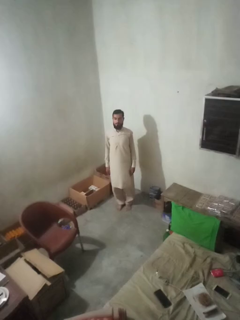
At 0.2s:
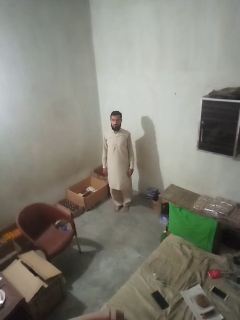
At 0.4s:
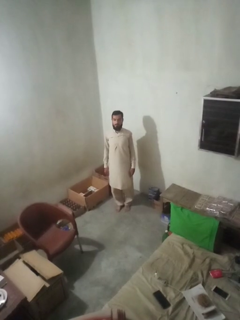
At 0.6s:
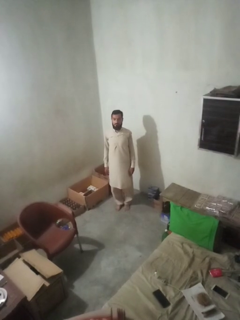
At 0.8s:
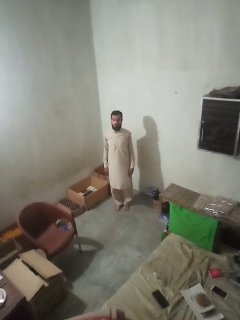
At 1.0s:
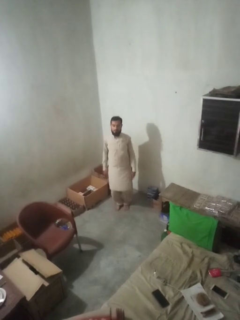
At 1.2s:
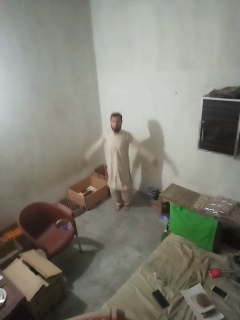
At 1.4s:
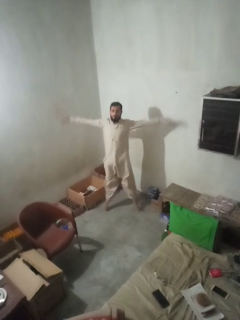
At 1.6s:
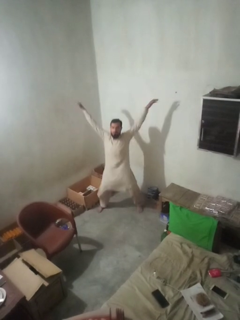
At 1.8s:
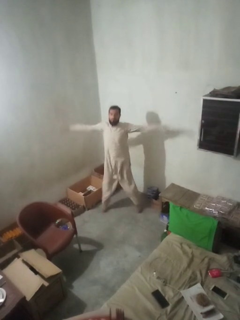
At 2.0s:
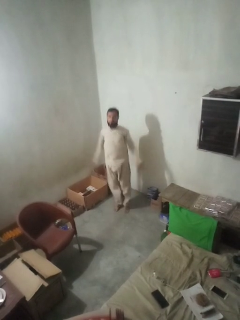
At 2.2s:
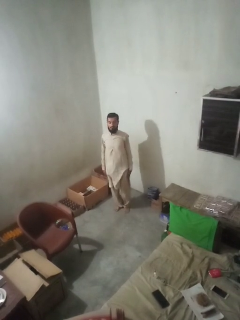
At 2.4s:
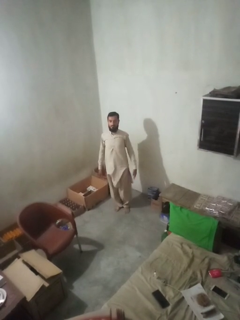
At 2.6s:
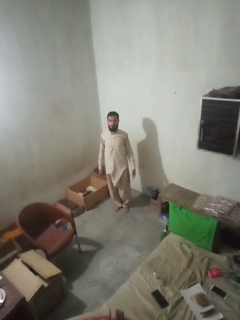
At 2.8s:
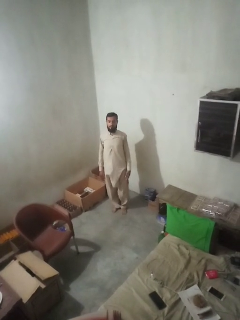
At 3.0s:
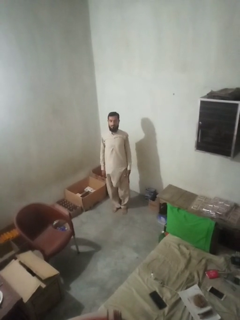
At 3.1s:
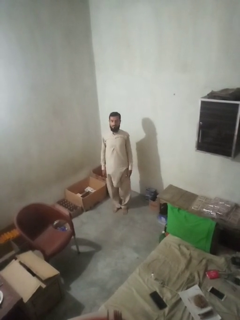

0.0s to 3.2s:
person exercises with jumping jacks

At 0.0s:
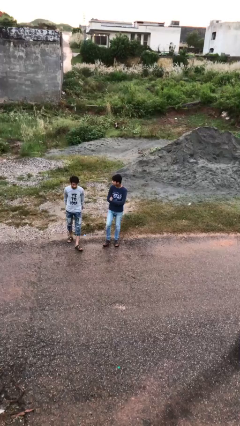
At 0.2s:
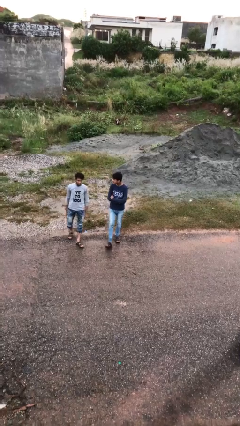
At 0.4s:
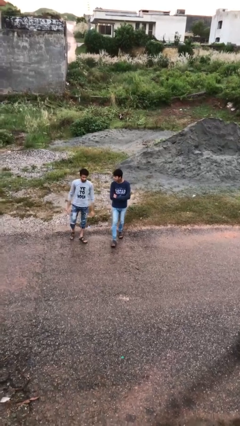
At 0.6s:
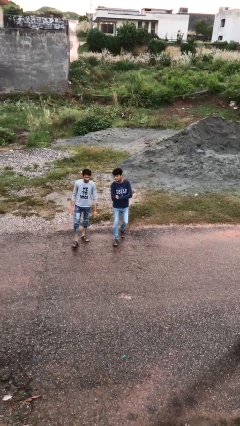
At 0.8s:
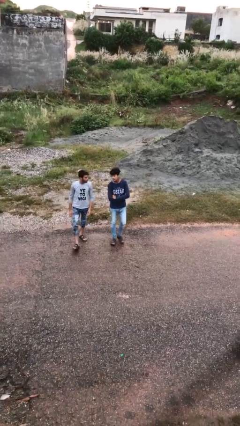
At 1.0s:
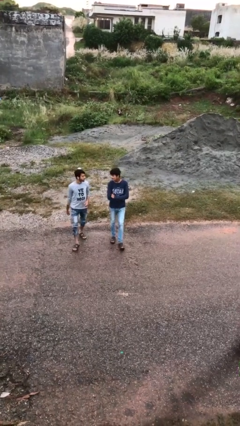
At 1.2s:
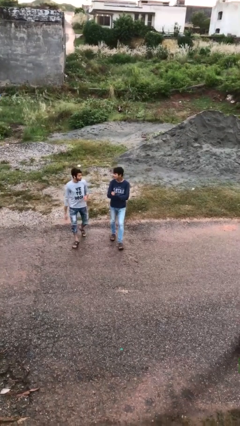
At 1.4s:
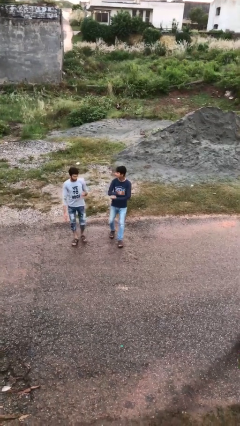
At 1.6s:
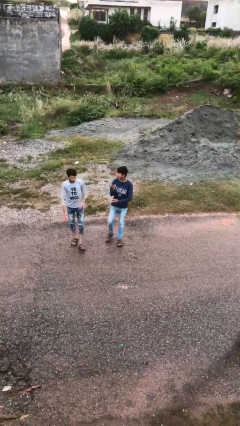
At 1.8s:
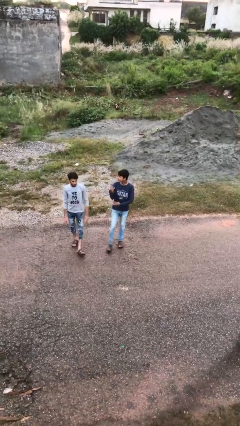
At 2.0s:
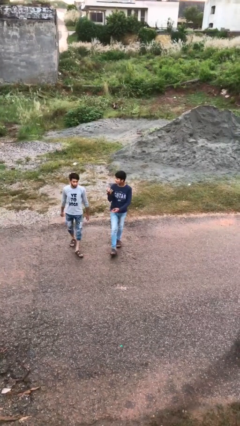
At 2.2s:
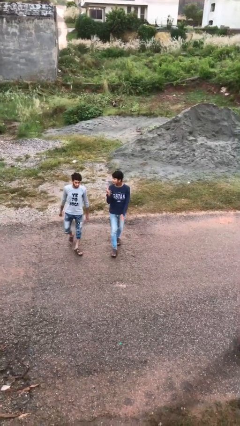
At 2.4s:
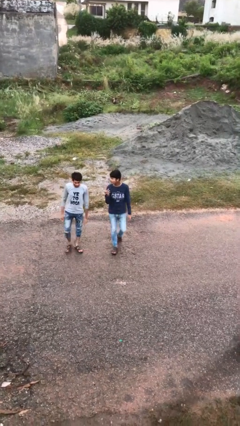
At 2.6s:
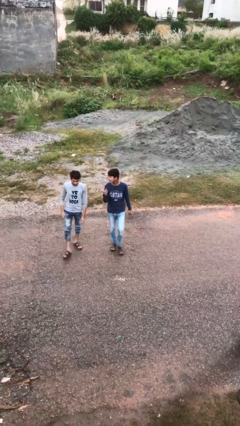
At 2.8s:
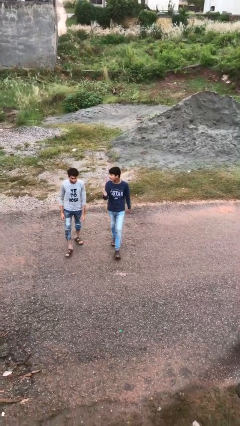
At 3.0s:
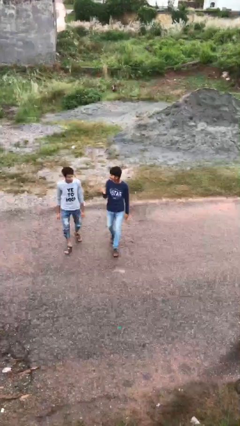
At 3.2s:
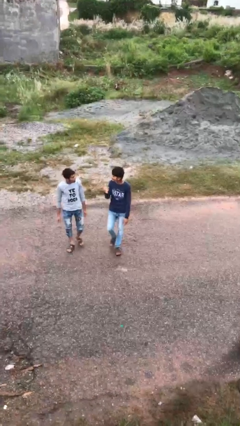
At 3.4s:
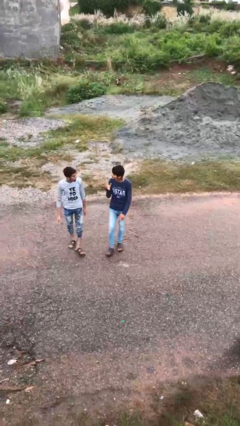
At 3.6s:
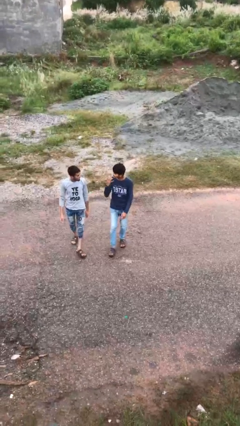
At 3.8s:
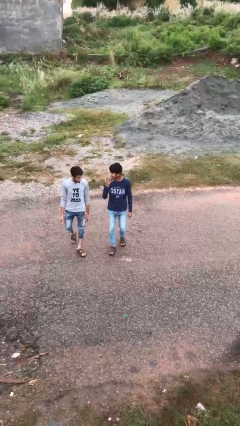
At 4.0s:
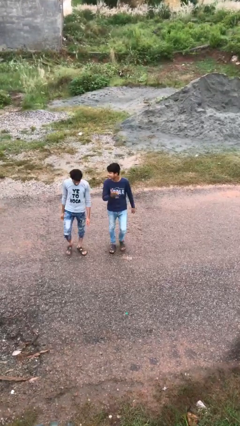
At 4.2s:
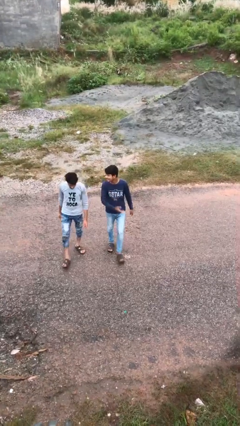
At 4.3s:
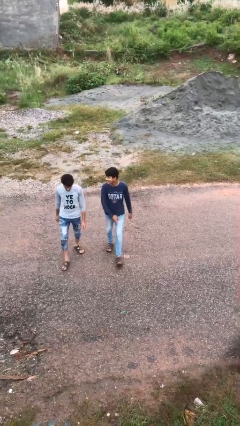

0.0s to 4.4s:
person talks to person

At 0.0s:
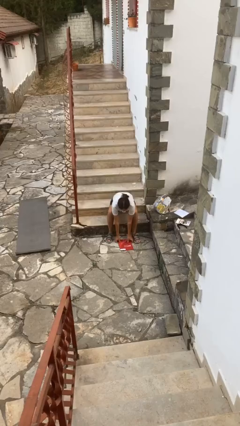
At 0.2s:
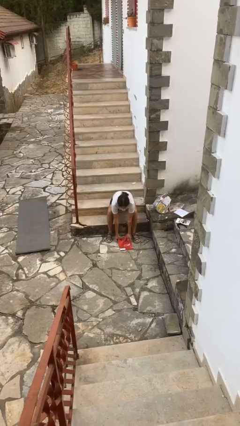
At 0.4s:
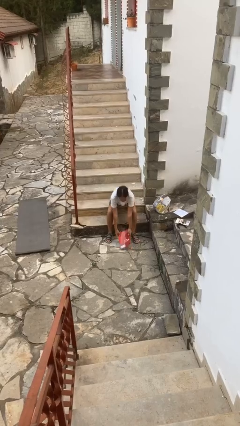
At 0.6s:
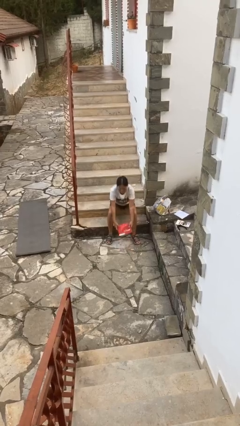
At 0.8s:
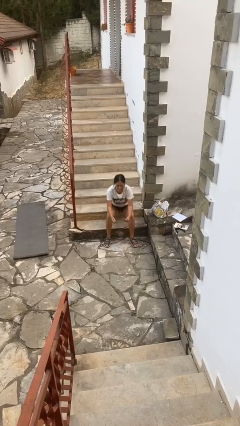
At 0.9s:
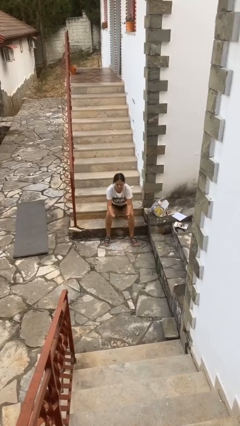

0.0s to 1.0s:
person picks up object from floor

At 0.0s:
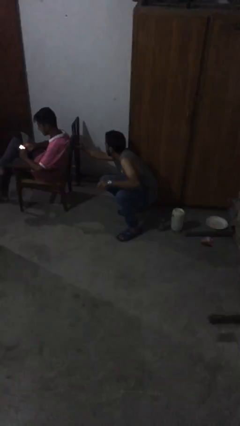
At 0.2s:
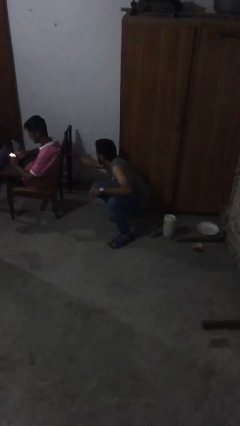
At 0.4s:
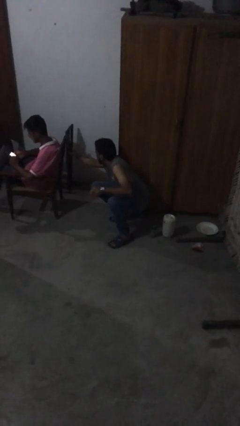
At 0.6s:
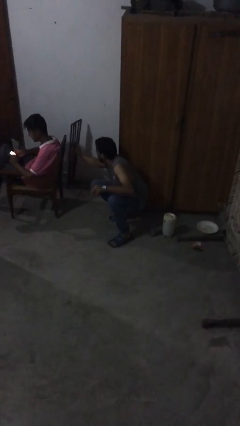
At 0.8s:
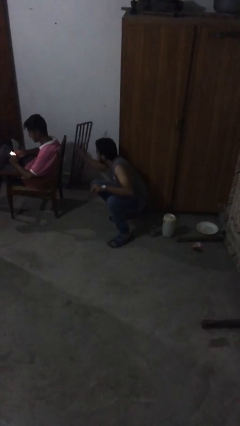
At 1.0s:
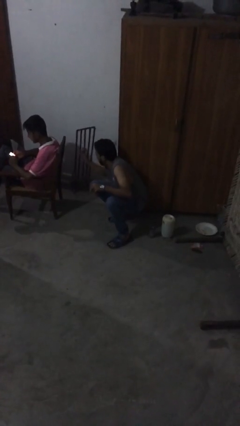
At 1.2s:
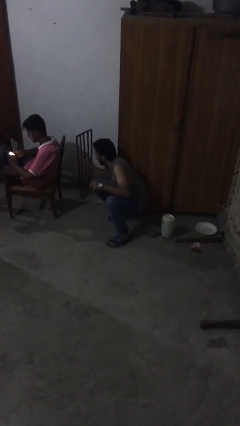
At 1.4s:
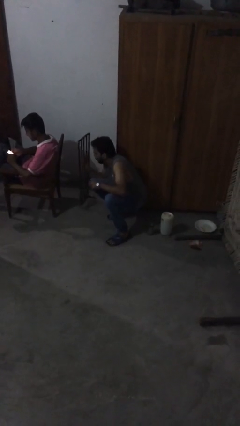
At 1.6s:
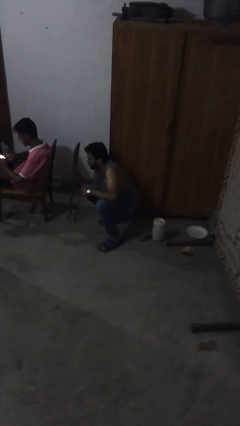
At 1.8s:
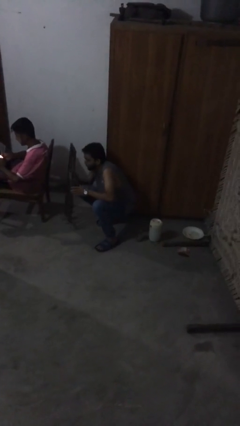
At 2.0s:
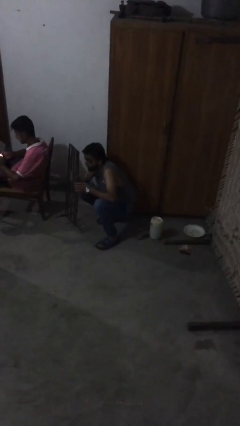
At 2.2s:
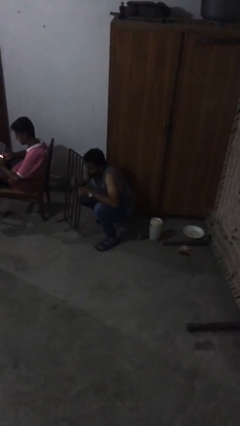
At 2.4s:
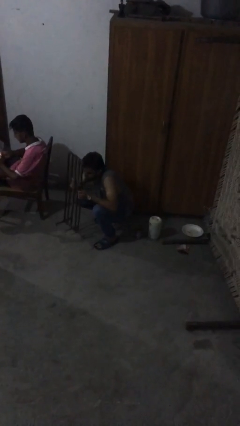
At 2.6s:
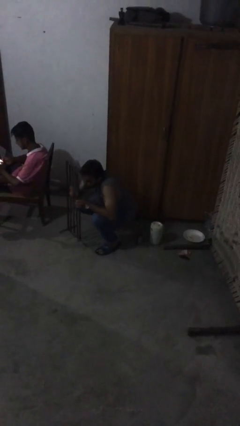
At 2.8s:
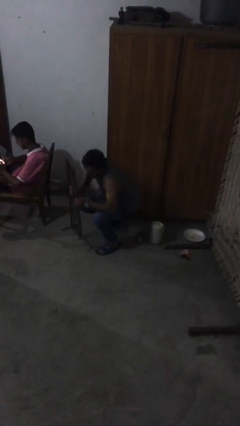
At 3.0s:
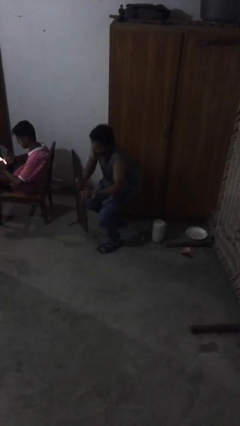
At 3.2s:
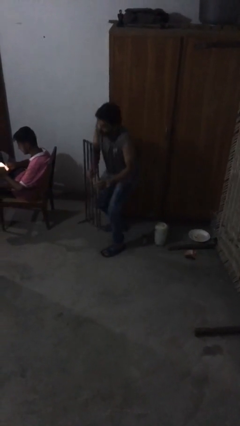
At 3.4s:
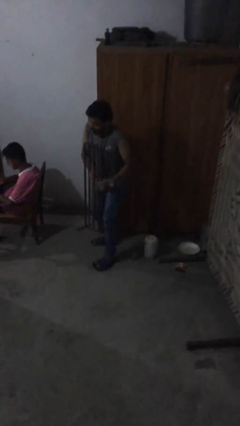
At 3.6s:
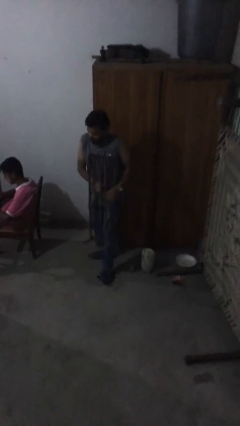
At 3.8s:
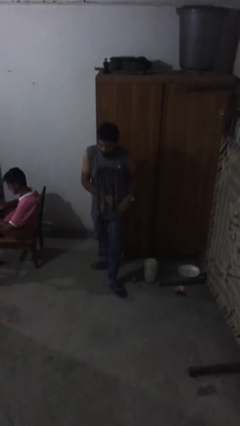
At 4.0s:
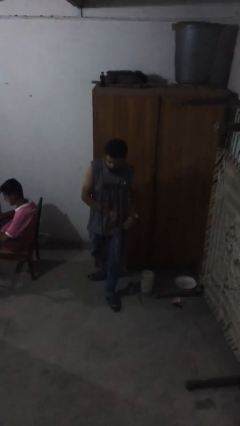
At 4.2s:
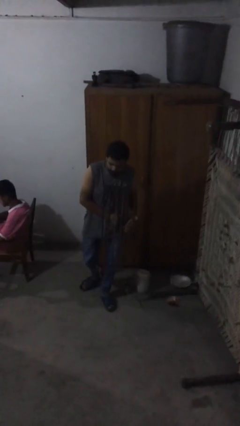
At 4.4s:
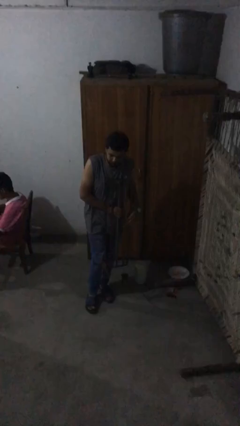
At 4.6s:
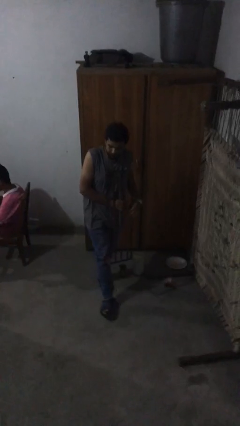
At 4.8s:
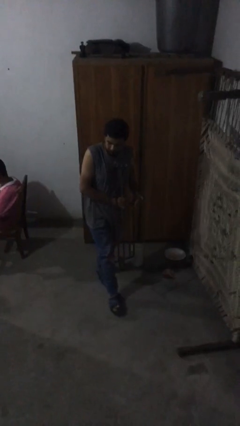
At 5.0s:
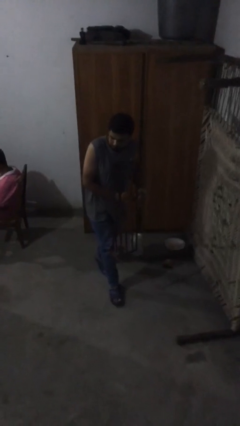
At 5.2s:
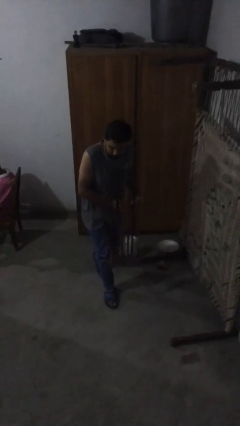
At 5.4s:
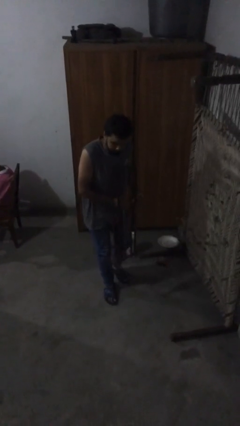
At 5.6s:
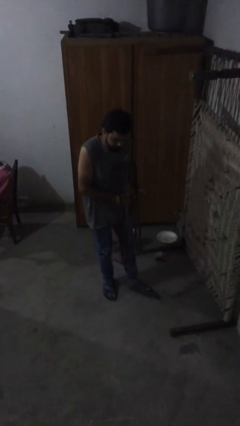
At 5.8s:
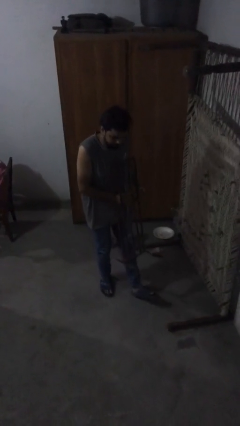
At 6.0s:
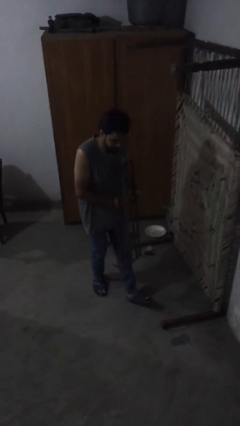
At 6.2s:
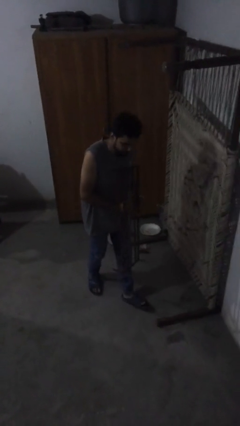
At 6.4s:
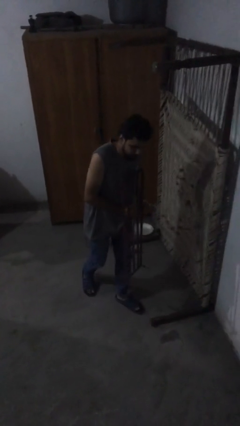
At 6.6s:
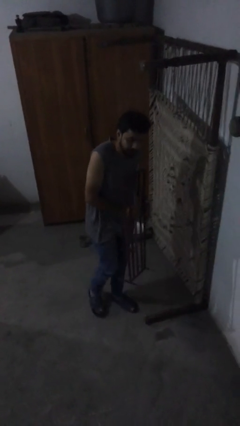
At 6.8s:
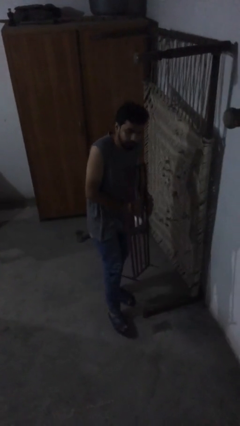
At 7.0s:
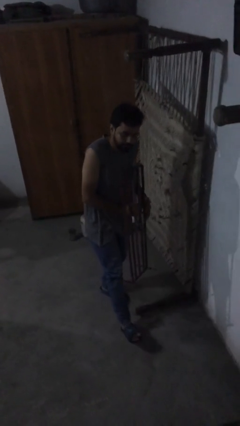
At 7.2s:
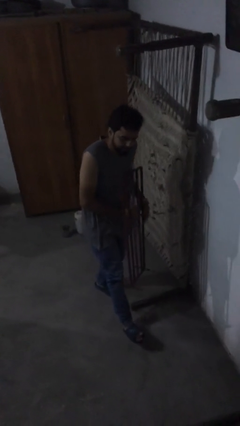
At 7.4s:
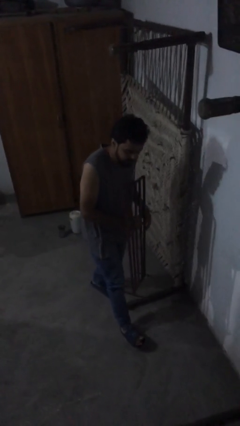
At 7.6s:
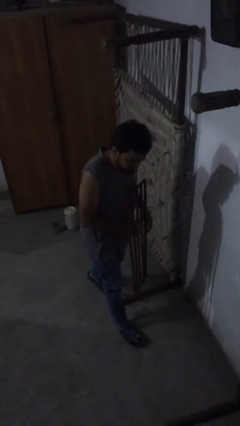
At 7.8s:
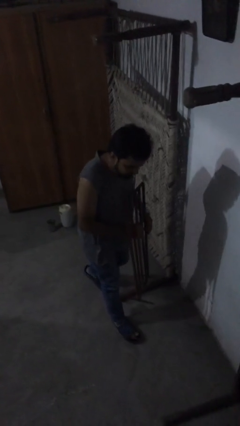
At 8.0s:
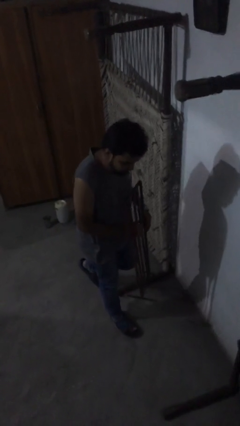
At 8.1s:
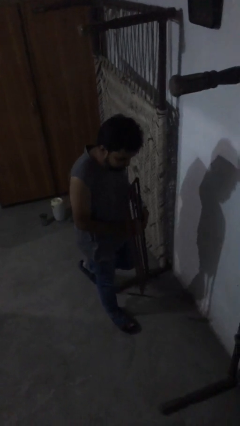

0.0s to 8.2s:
person steals object from person

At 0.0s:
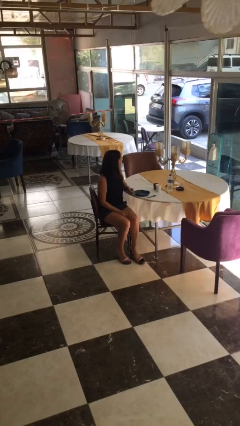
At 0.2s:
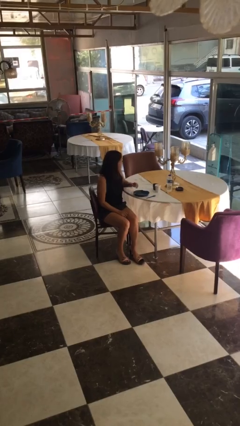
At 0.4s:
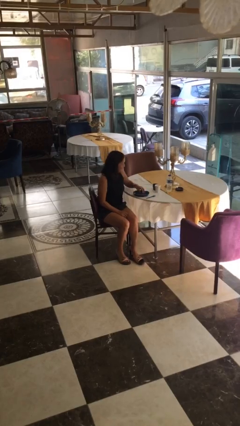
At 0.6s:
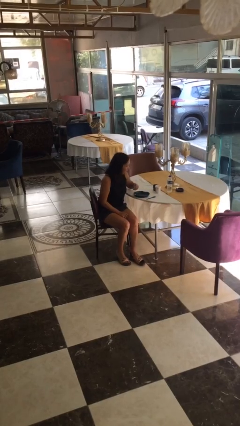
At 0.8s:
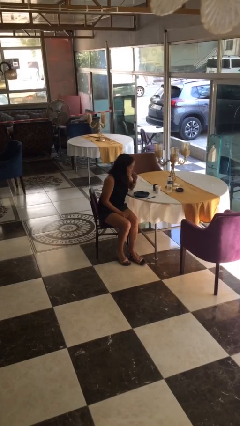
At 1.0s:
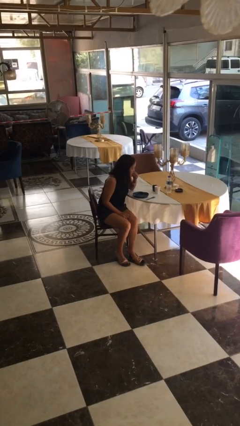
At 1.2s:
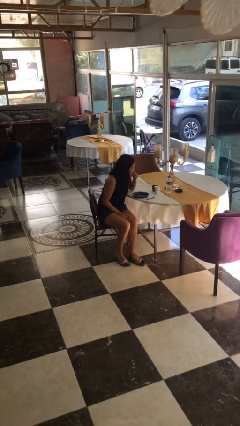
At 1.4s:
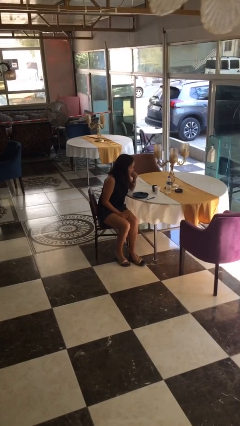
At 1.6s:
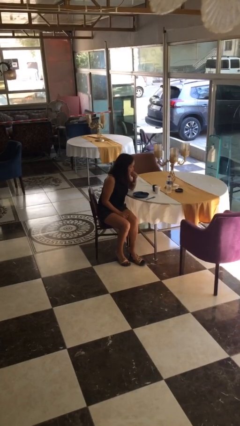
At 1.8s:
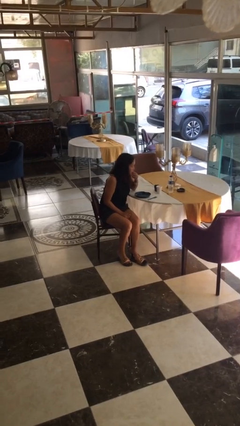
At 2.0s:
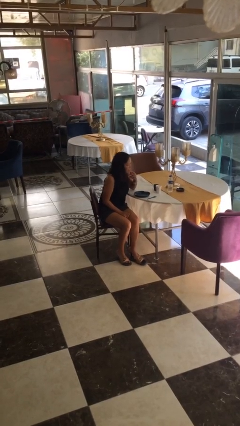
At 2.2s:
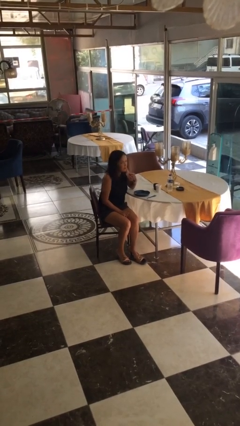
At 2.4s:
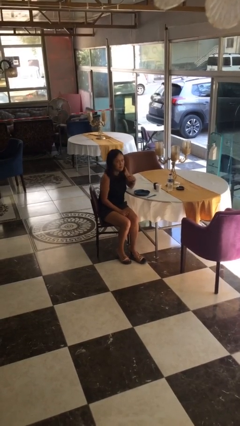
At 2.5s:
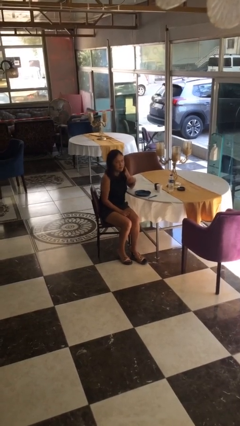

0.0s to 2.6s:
person eats with hands
